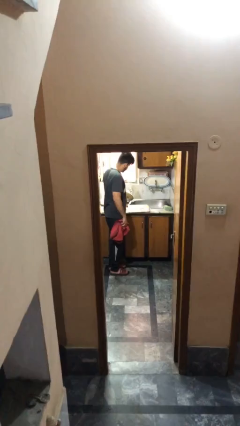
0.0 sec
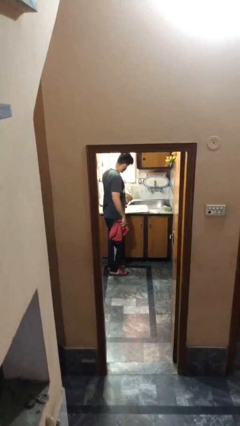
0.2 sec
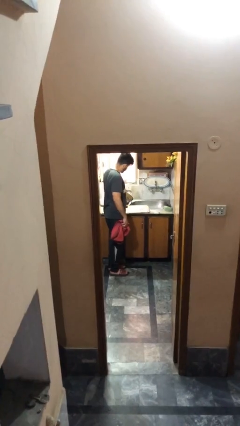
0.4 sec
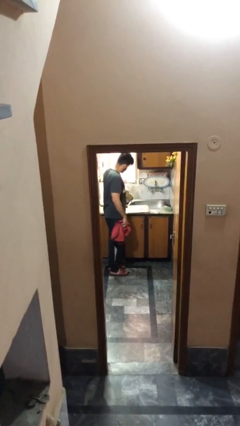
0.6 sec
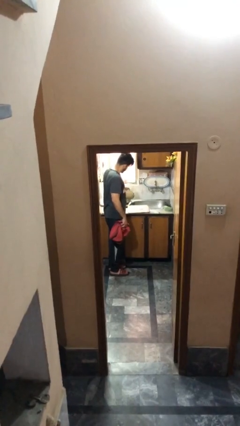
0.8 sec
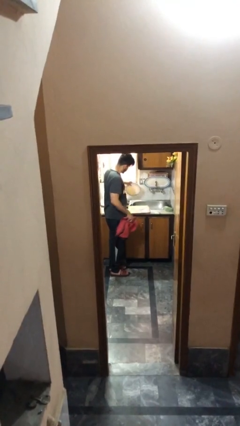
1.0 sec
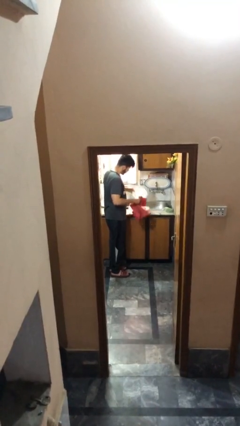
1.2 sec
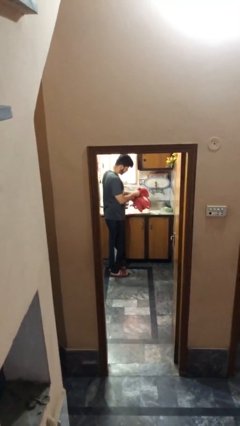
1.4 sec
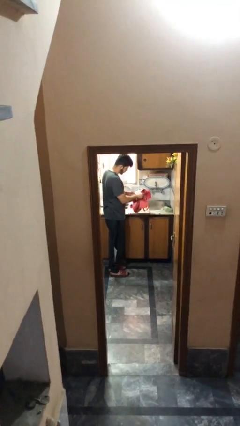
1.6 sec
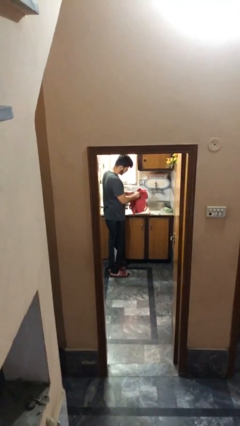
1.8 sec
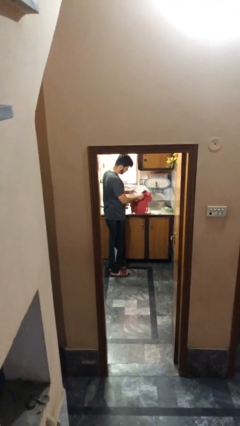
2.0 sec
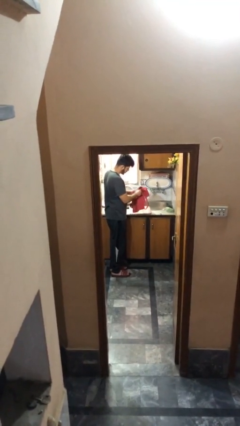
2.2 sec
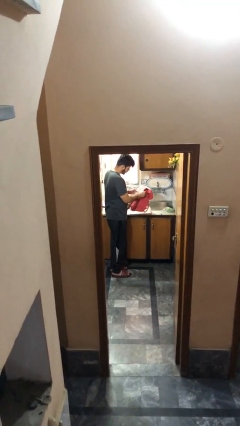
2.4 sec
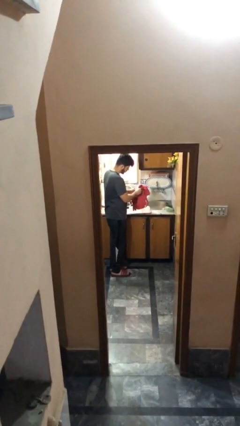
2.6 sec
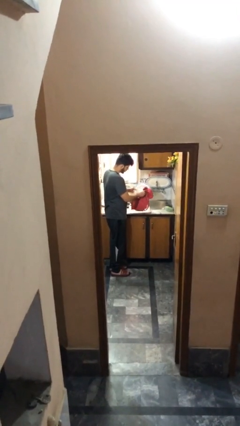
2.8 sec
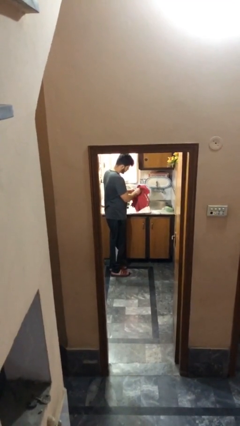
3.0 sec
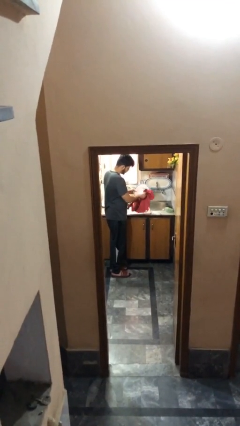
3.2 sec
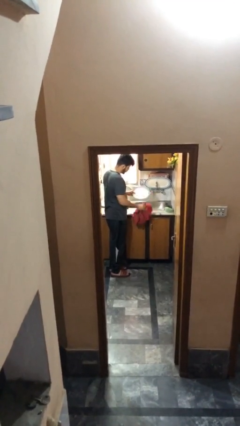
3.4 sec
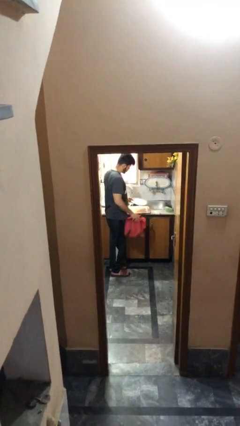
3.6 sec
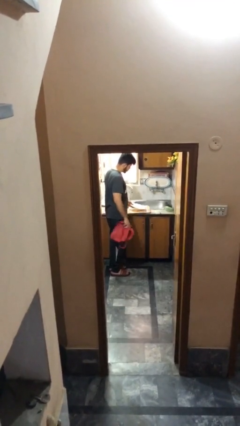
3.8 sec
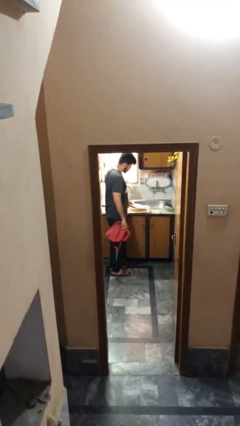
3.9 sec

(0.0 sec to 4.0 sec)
person dries dish

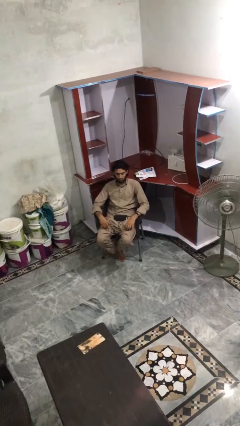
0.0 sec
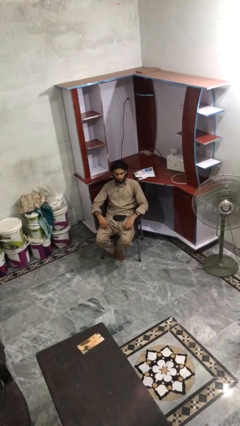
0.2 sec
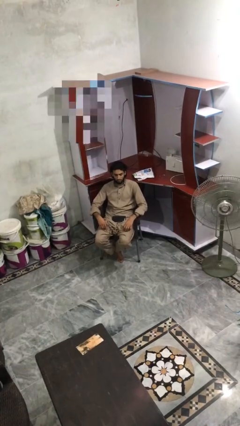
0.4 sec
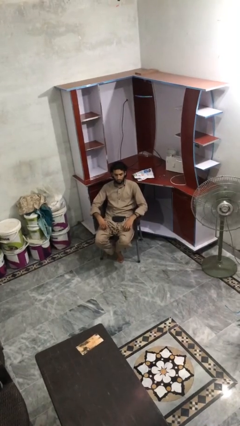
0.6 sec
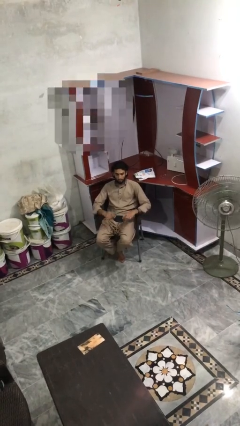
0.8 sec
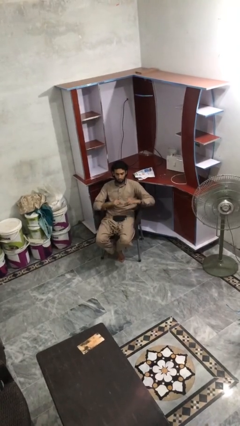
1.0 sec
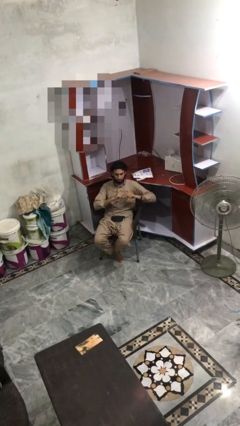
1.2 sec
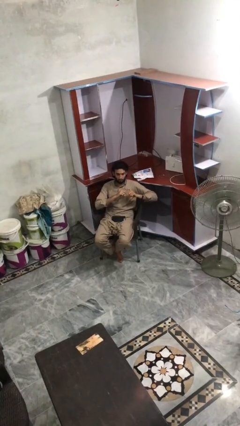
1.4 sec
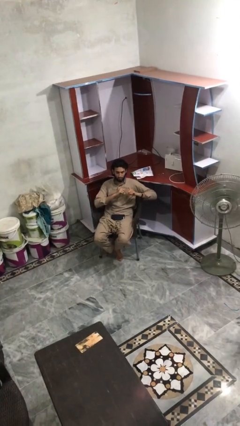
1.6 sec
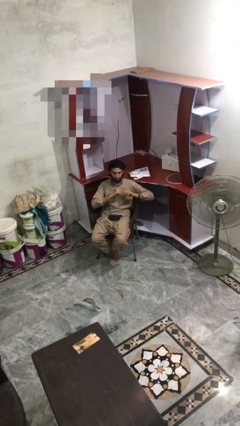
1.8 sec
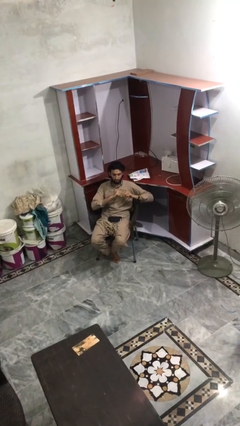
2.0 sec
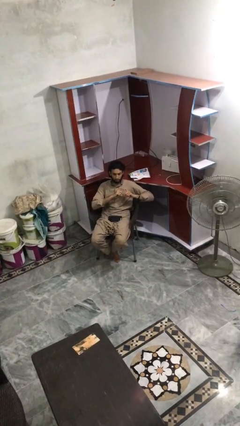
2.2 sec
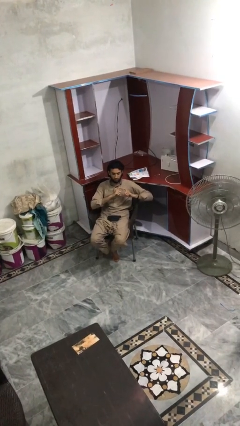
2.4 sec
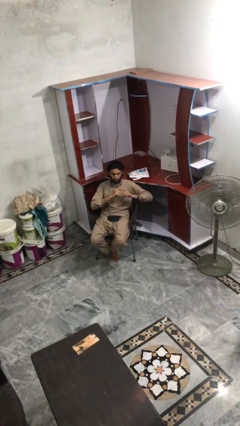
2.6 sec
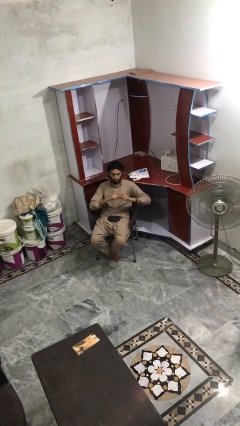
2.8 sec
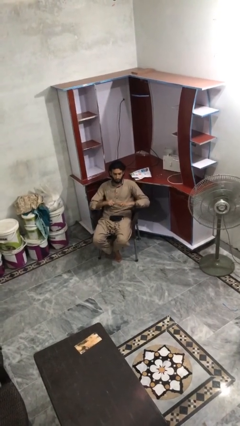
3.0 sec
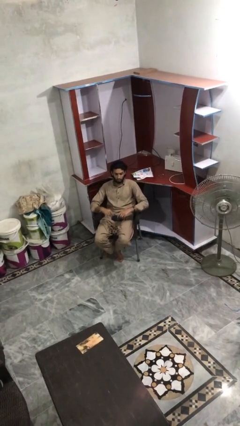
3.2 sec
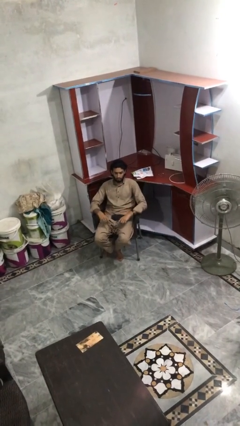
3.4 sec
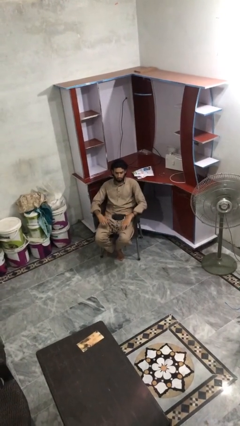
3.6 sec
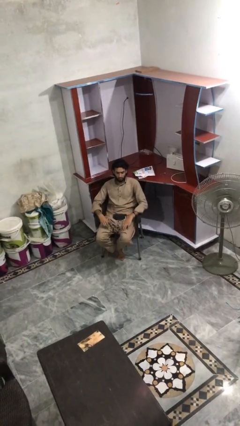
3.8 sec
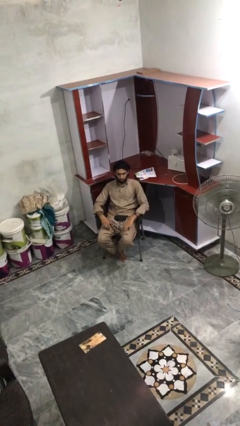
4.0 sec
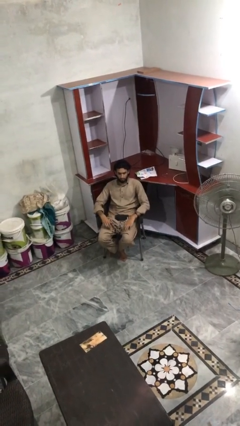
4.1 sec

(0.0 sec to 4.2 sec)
person gestures heart

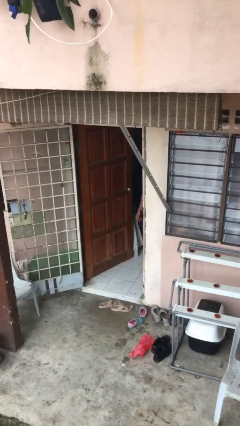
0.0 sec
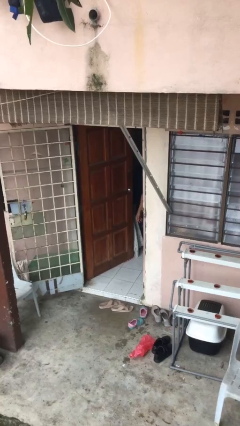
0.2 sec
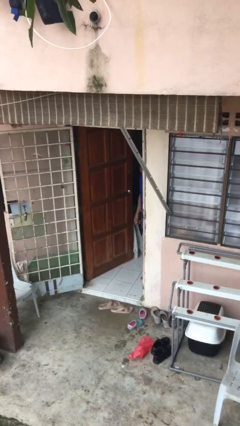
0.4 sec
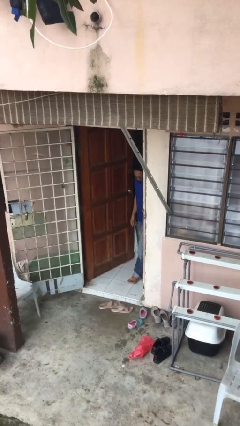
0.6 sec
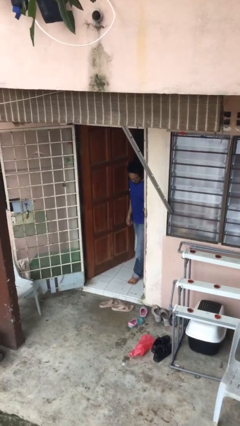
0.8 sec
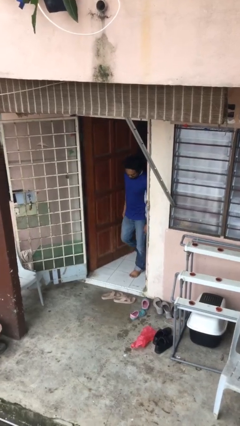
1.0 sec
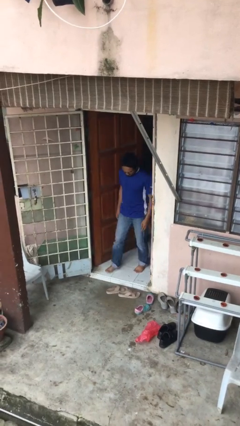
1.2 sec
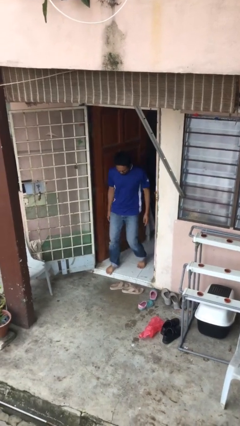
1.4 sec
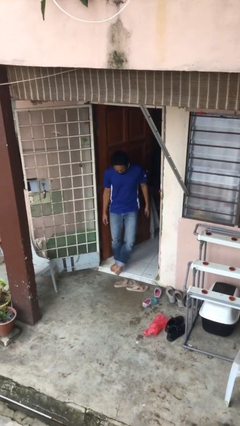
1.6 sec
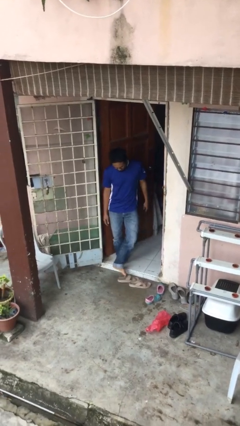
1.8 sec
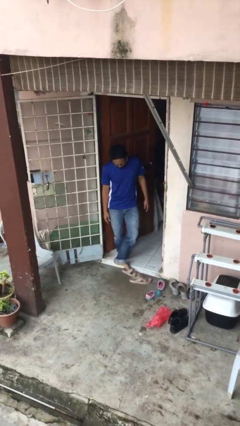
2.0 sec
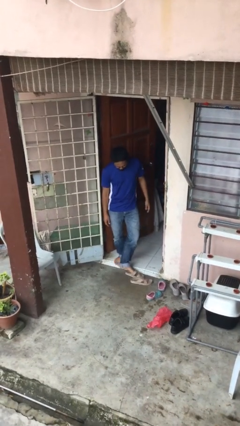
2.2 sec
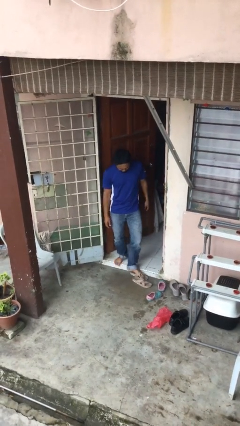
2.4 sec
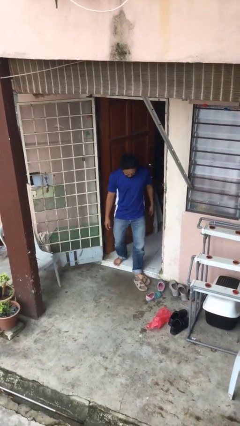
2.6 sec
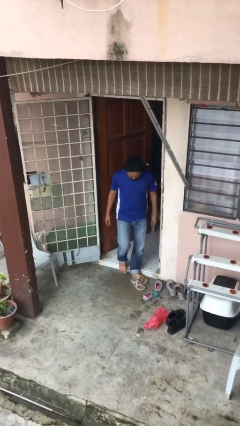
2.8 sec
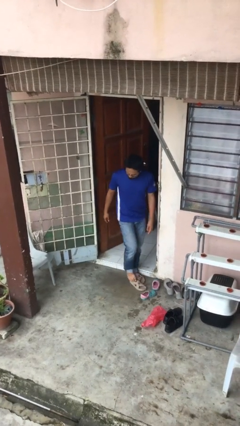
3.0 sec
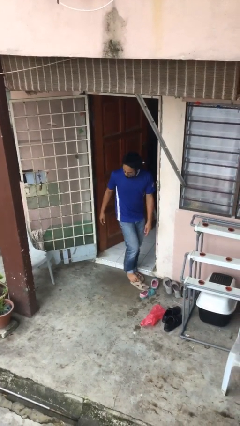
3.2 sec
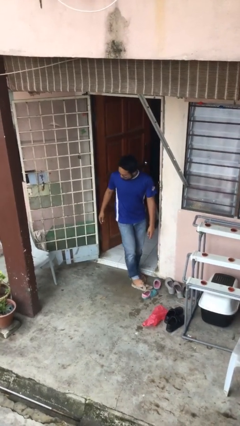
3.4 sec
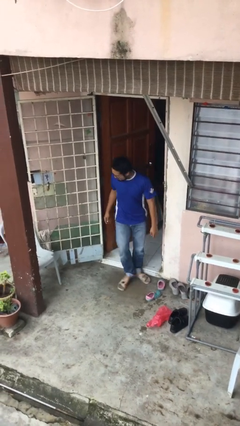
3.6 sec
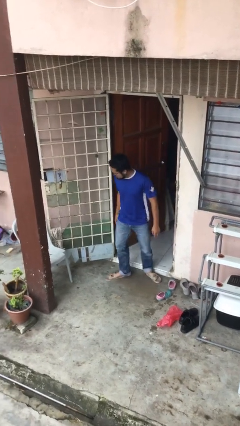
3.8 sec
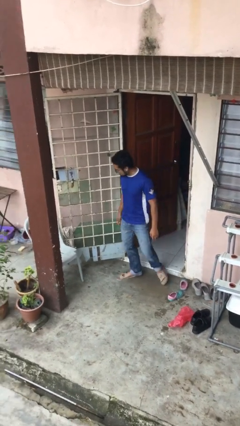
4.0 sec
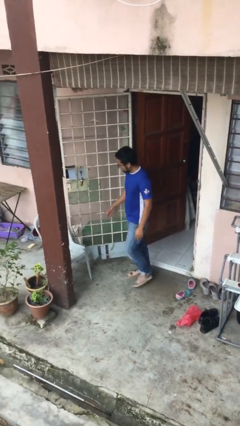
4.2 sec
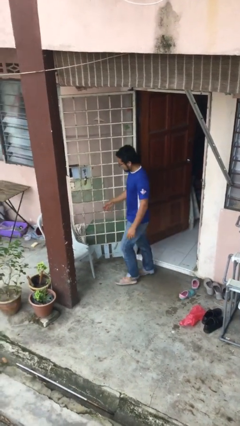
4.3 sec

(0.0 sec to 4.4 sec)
person enters scene through structure

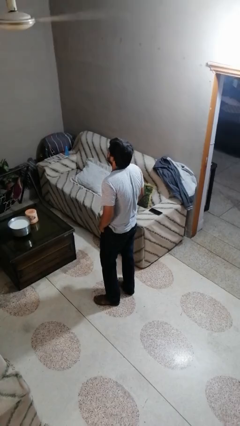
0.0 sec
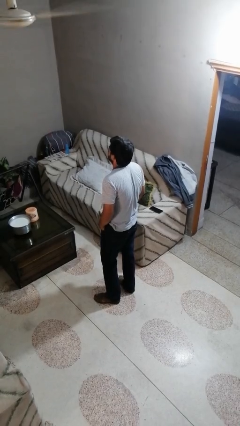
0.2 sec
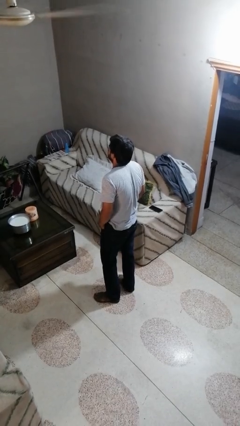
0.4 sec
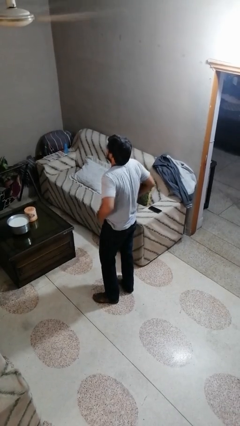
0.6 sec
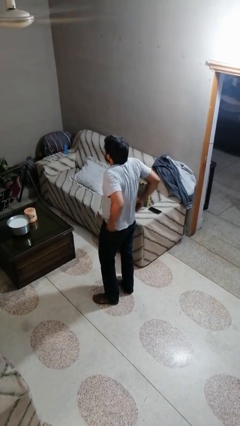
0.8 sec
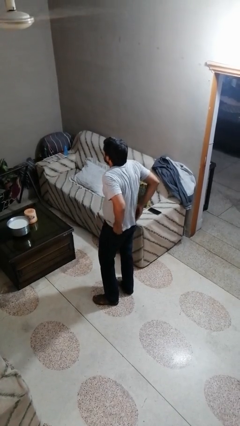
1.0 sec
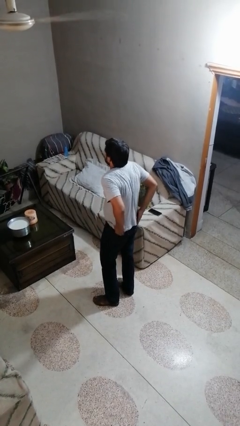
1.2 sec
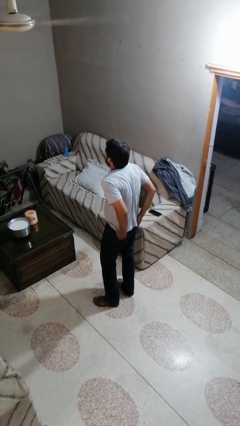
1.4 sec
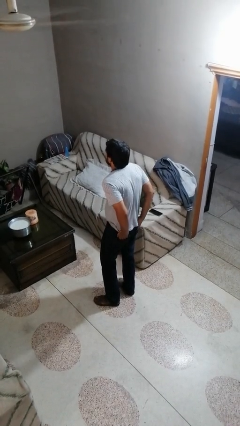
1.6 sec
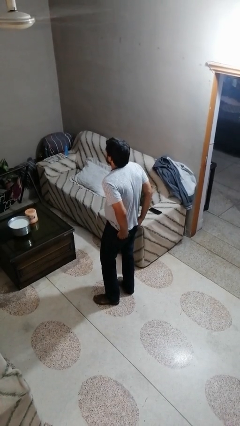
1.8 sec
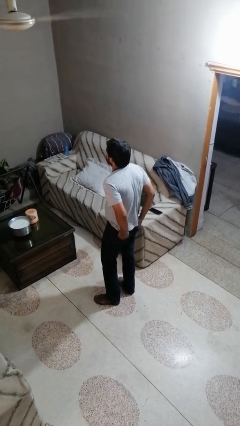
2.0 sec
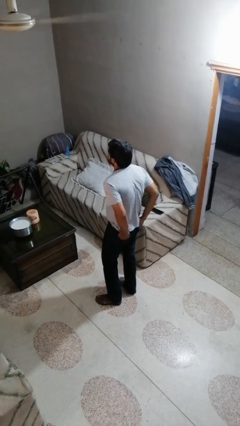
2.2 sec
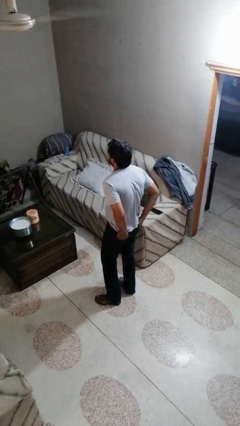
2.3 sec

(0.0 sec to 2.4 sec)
person puts hands in back pockets

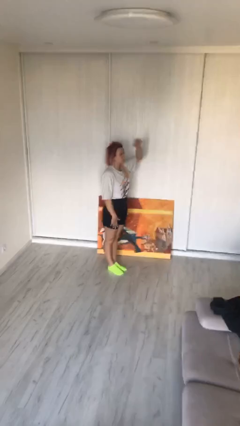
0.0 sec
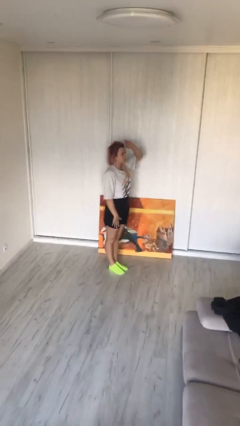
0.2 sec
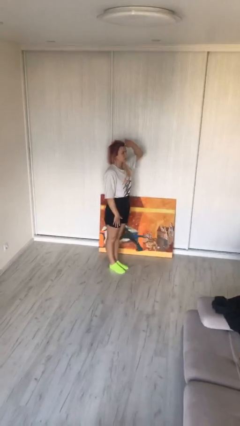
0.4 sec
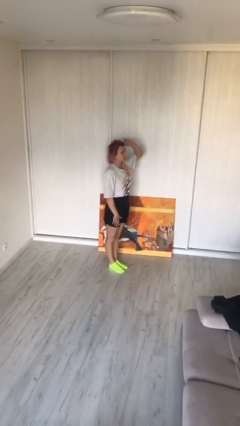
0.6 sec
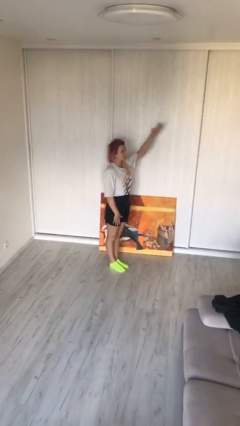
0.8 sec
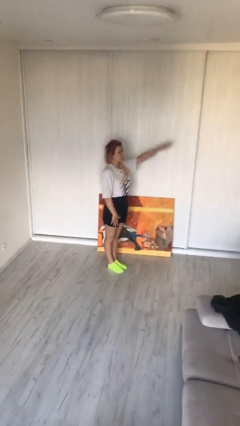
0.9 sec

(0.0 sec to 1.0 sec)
person salutes

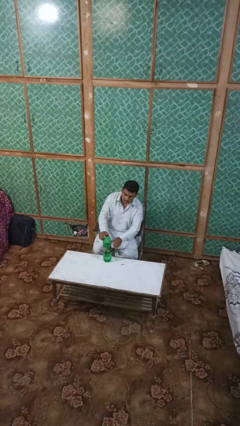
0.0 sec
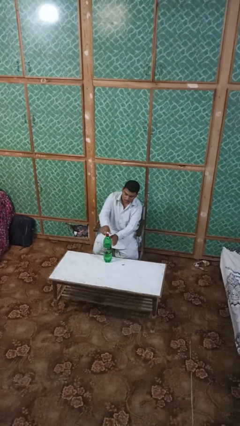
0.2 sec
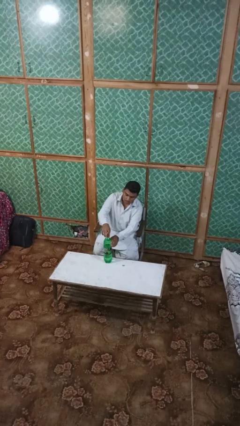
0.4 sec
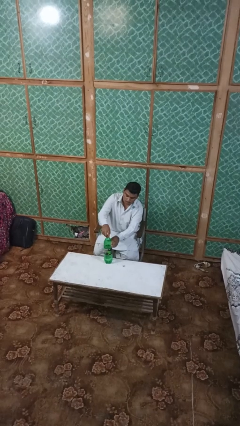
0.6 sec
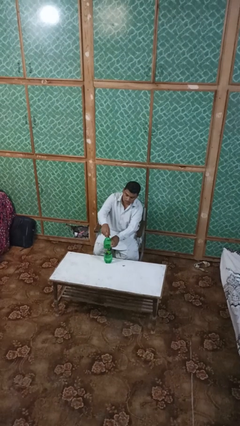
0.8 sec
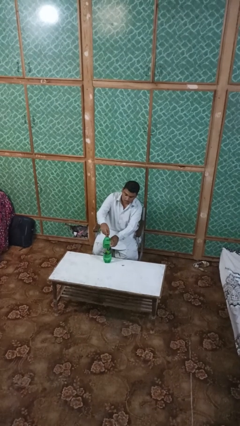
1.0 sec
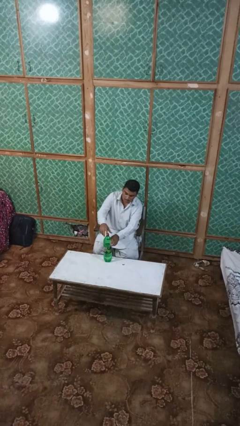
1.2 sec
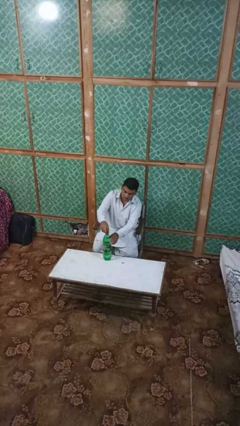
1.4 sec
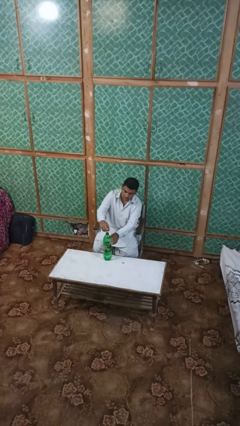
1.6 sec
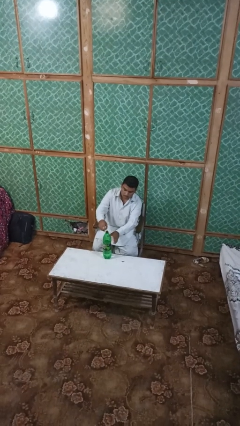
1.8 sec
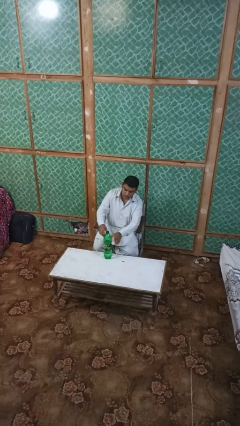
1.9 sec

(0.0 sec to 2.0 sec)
person unscrews lid from bottle
